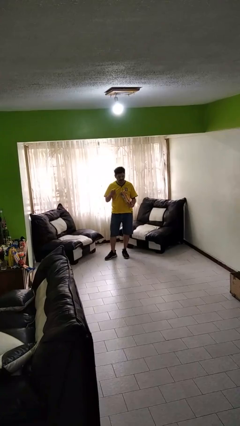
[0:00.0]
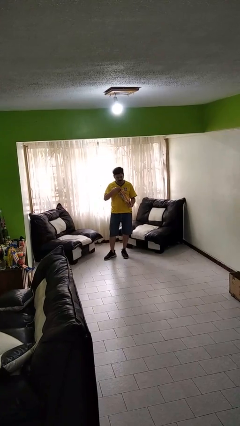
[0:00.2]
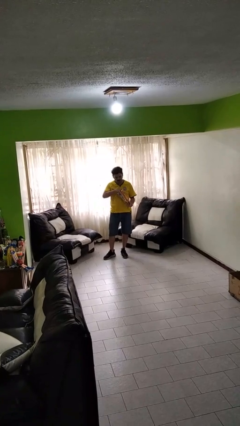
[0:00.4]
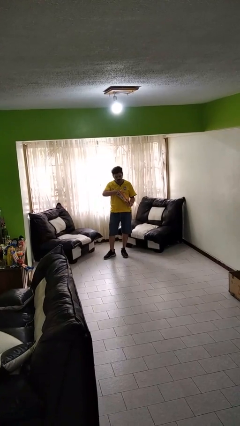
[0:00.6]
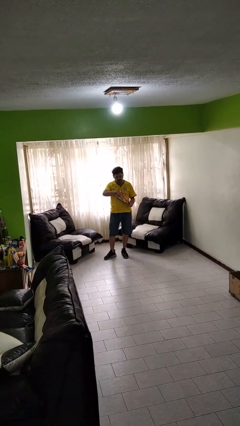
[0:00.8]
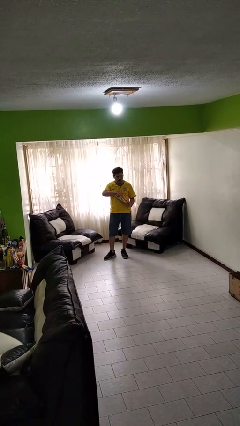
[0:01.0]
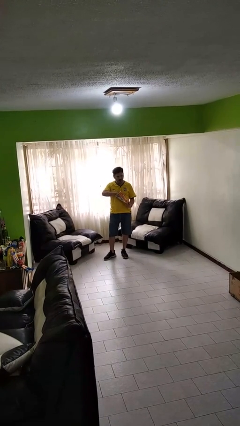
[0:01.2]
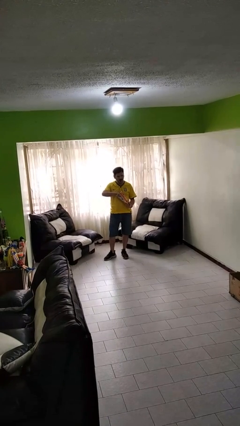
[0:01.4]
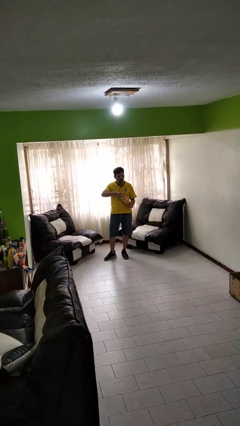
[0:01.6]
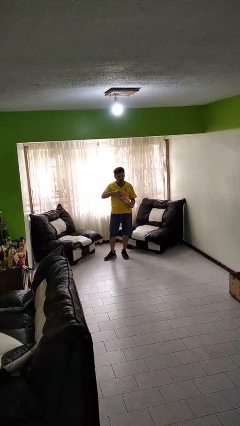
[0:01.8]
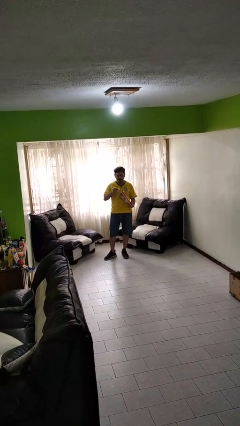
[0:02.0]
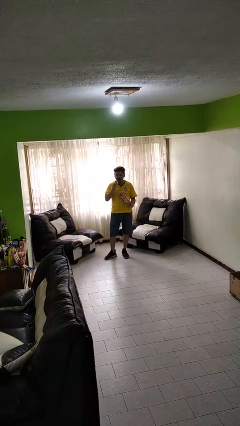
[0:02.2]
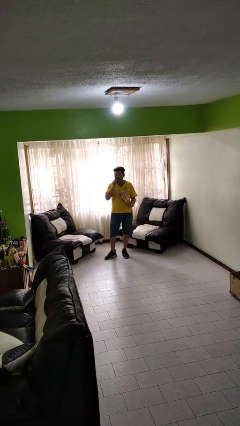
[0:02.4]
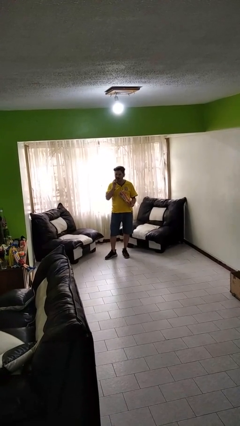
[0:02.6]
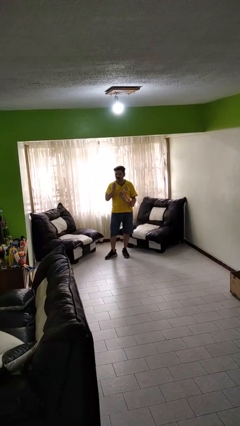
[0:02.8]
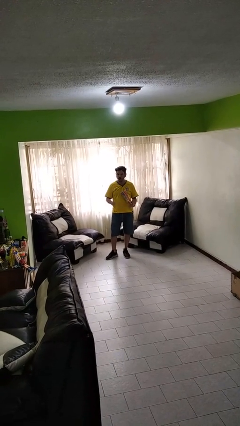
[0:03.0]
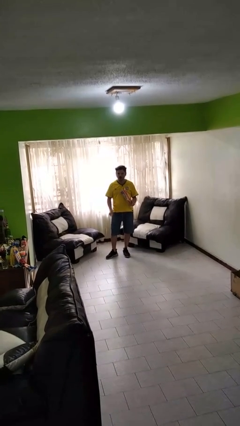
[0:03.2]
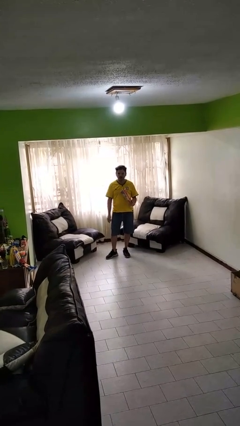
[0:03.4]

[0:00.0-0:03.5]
person eats snack from bag

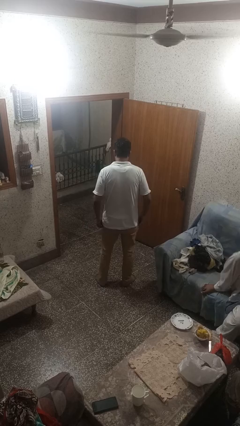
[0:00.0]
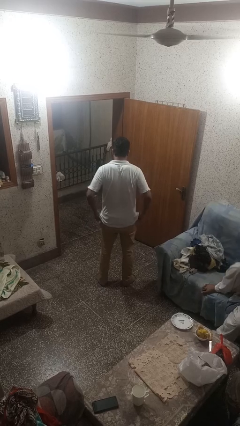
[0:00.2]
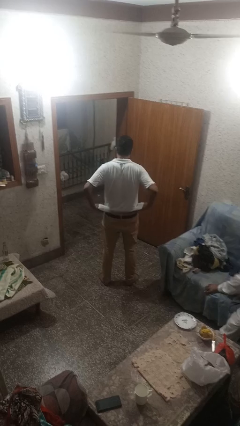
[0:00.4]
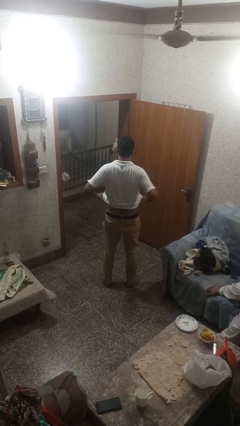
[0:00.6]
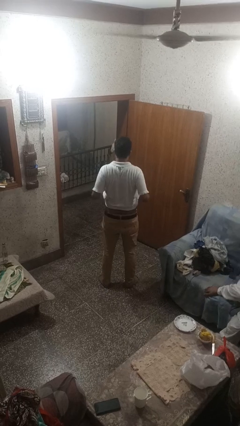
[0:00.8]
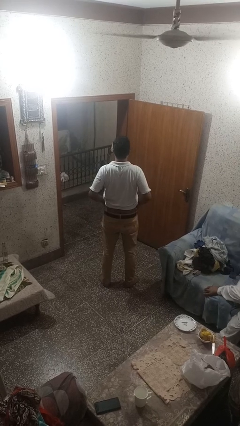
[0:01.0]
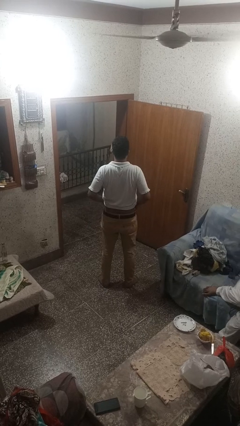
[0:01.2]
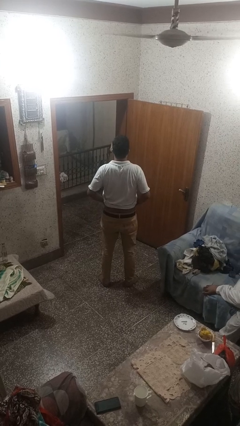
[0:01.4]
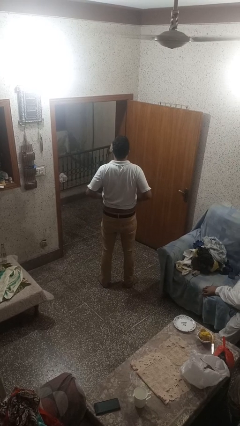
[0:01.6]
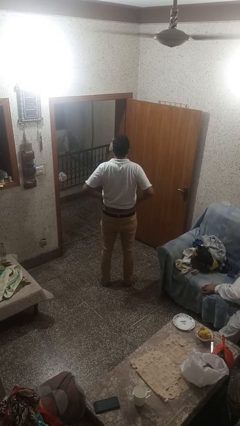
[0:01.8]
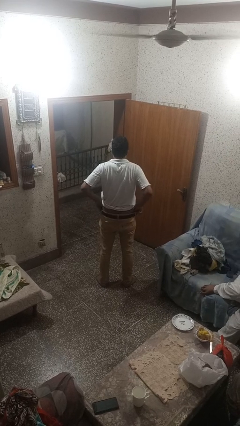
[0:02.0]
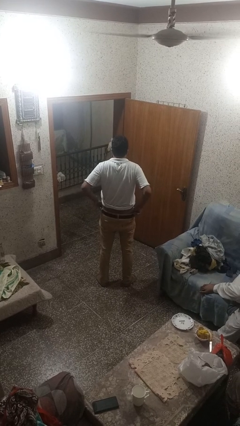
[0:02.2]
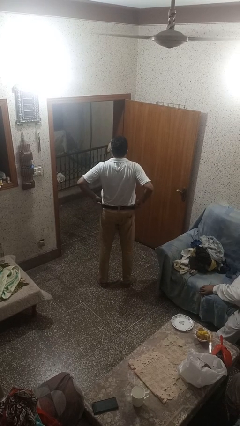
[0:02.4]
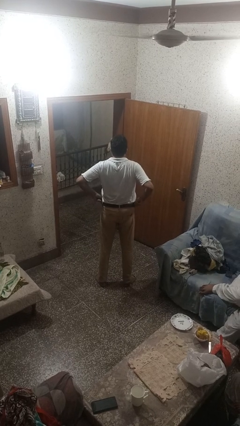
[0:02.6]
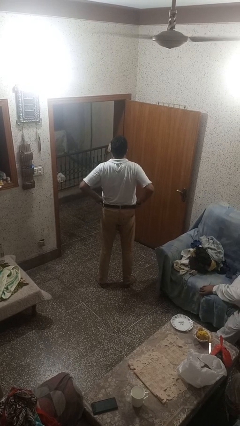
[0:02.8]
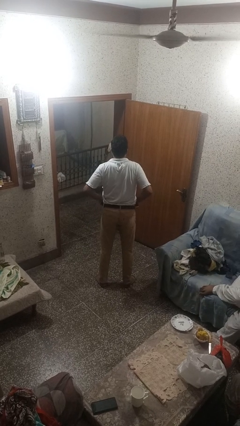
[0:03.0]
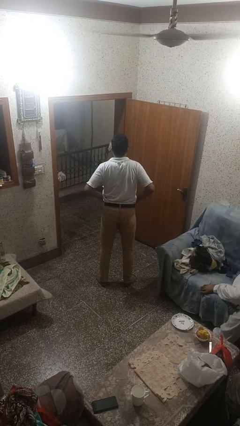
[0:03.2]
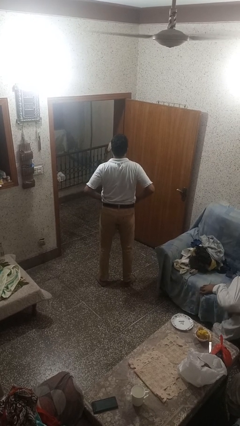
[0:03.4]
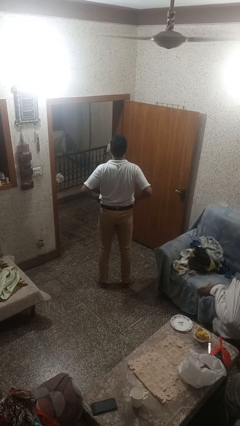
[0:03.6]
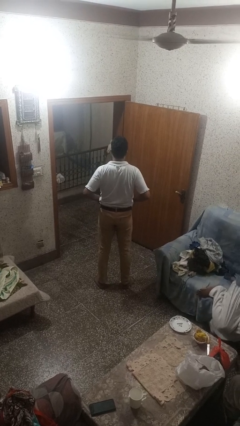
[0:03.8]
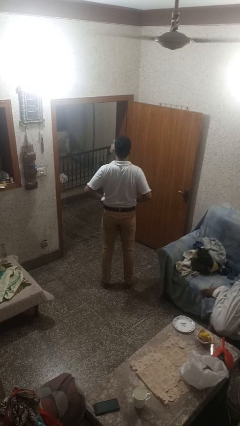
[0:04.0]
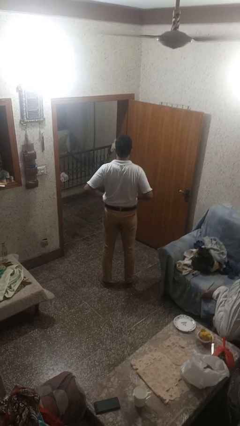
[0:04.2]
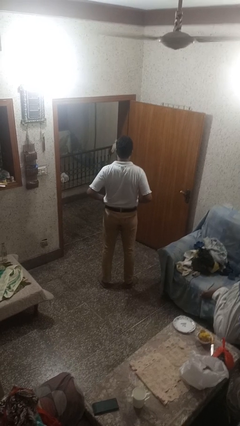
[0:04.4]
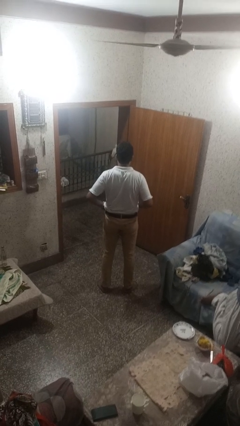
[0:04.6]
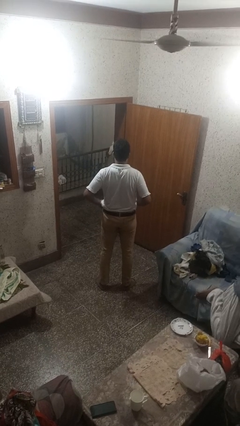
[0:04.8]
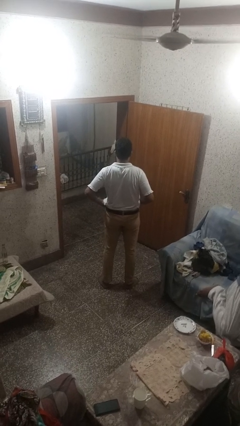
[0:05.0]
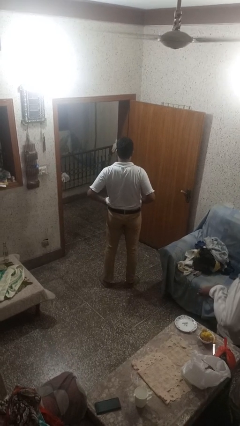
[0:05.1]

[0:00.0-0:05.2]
person hikes up pants

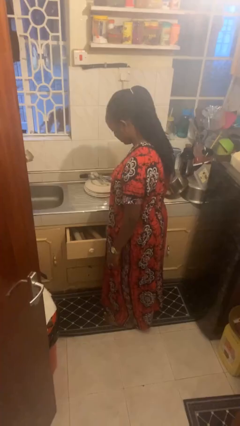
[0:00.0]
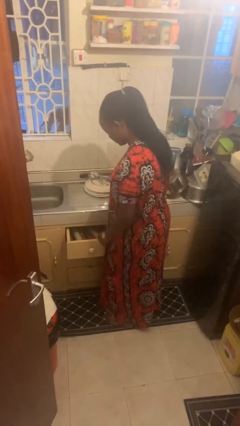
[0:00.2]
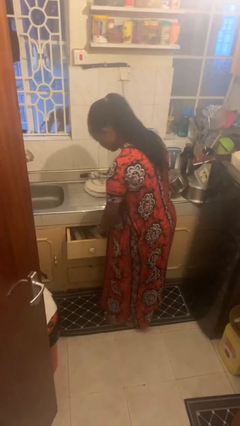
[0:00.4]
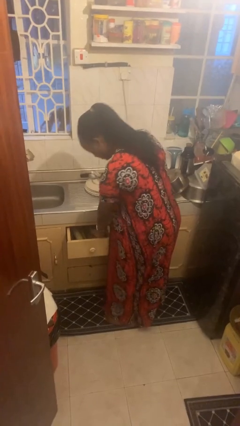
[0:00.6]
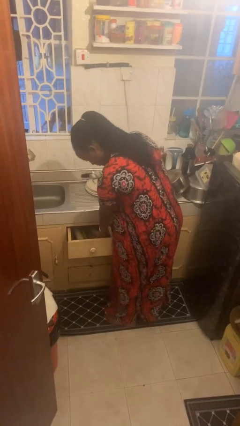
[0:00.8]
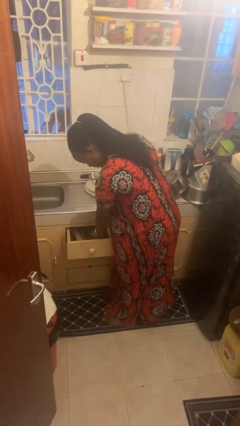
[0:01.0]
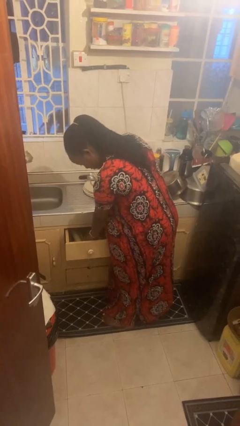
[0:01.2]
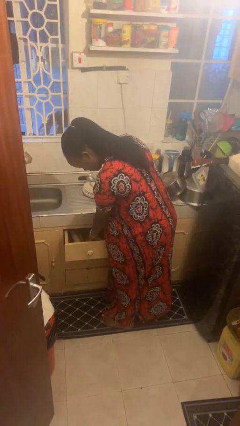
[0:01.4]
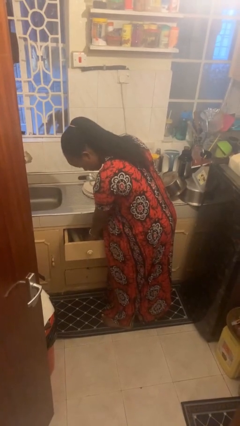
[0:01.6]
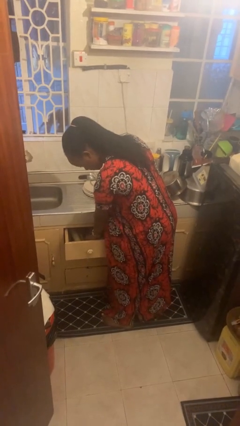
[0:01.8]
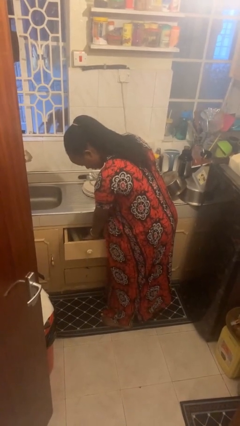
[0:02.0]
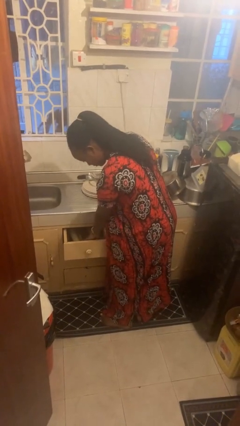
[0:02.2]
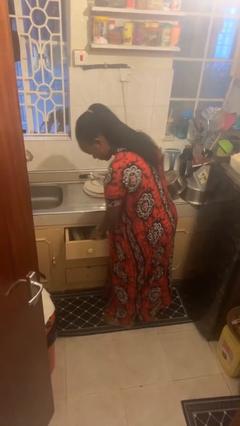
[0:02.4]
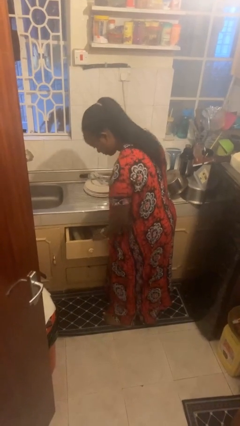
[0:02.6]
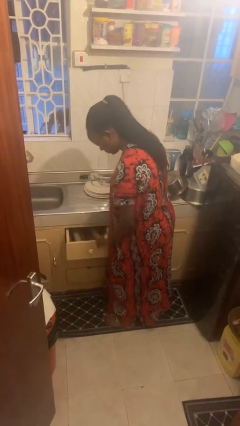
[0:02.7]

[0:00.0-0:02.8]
person searches in kitchen drawer

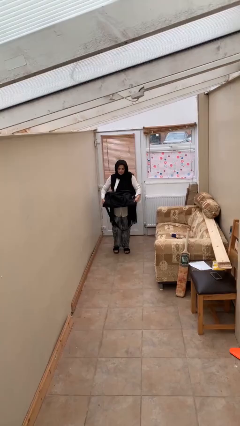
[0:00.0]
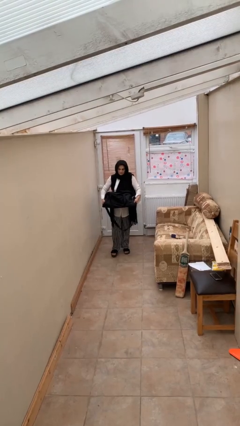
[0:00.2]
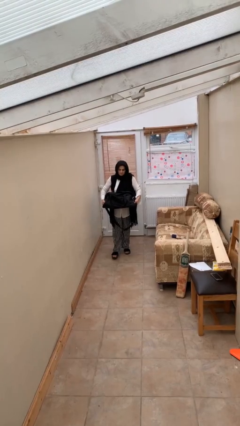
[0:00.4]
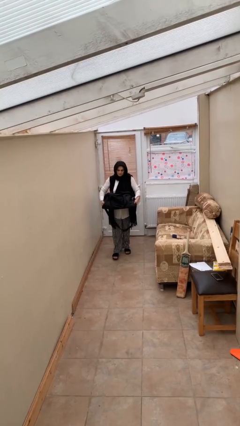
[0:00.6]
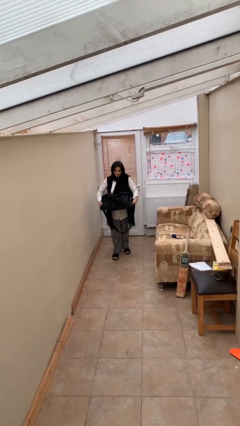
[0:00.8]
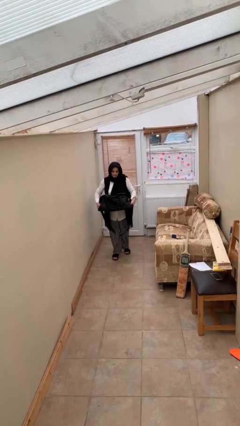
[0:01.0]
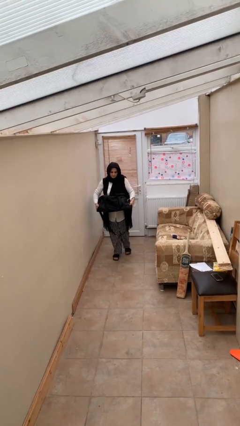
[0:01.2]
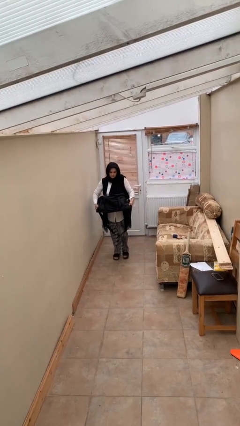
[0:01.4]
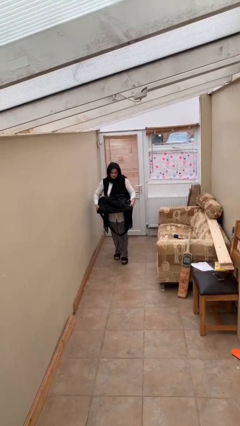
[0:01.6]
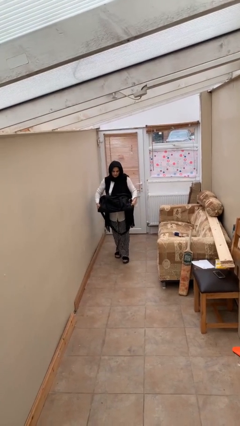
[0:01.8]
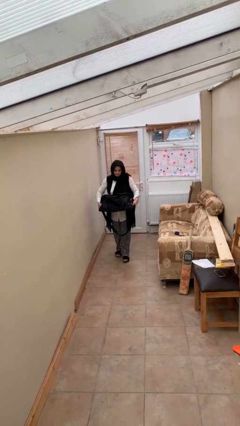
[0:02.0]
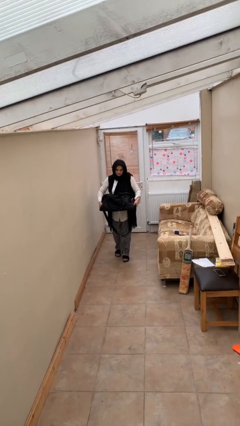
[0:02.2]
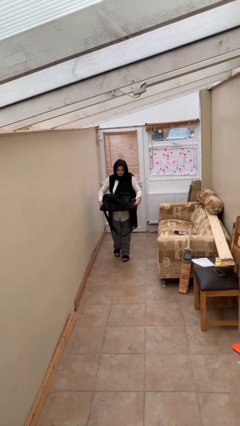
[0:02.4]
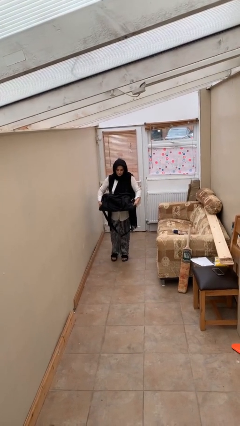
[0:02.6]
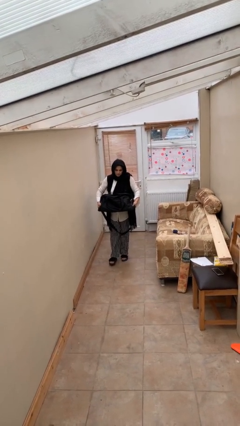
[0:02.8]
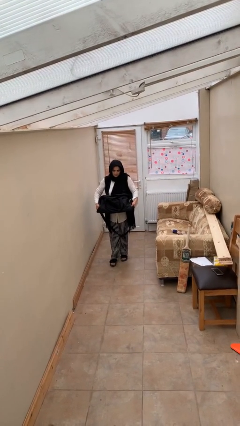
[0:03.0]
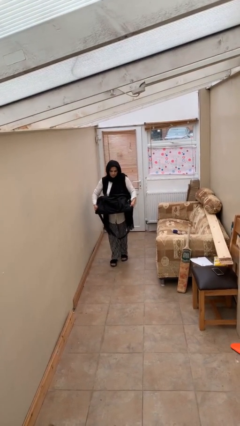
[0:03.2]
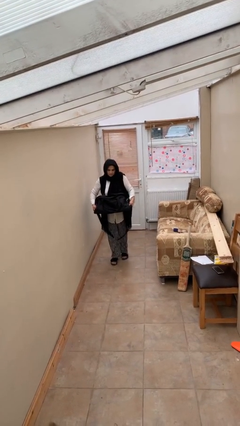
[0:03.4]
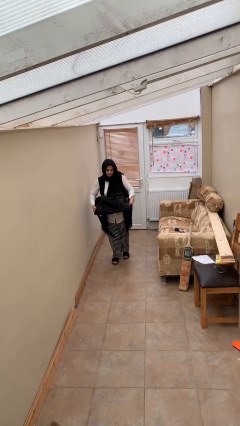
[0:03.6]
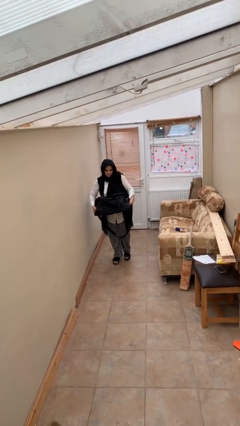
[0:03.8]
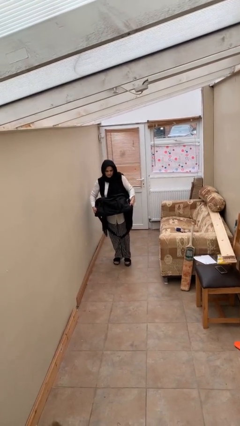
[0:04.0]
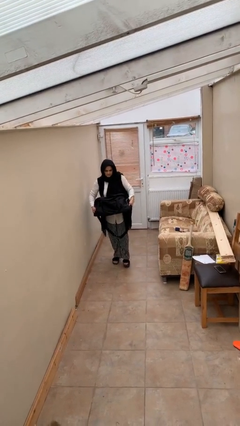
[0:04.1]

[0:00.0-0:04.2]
person carries heavy object

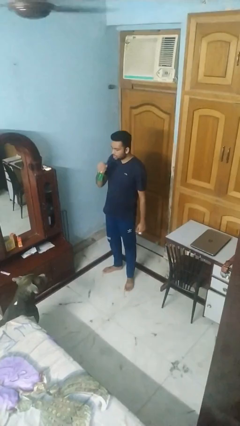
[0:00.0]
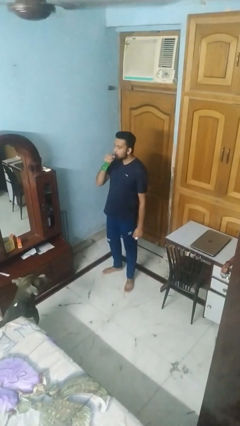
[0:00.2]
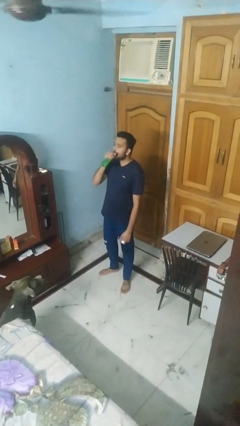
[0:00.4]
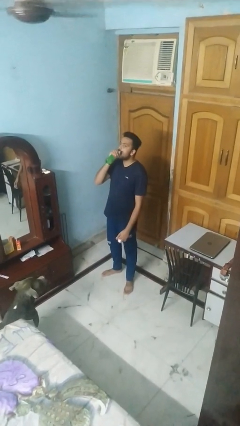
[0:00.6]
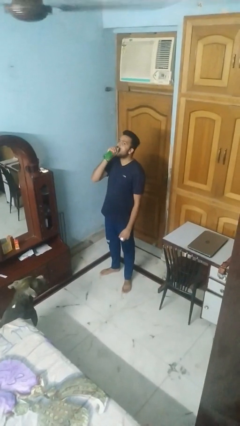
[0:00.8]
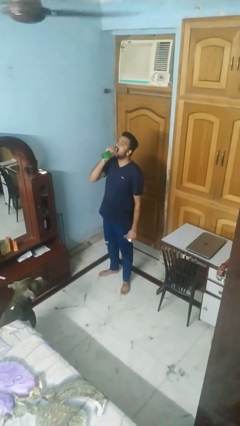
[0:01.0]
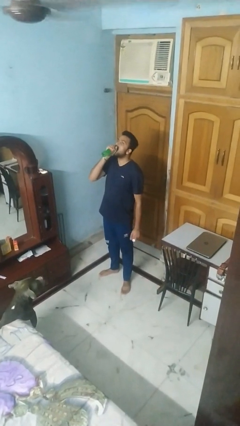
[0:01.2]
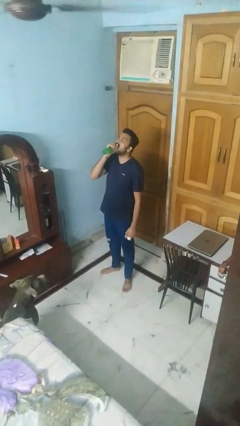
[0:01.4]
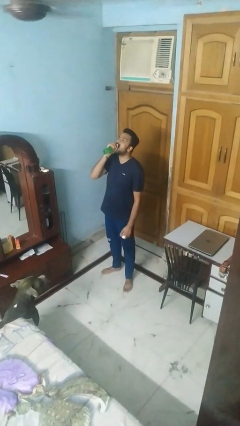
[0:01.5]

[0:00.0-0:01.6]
person drinks from bottle

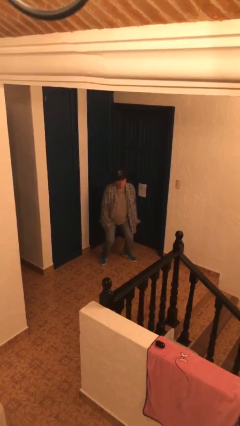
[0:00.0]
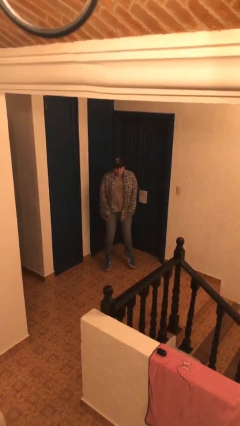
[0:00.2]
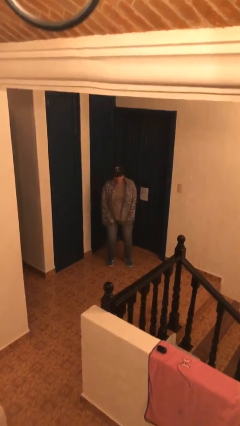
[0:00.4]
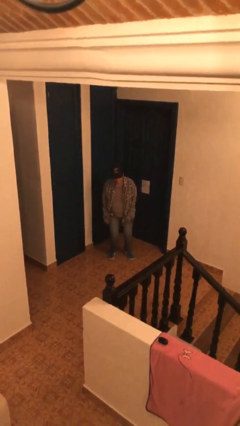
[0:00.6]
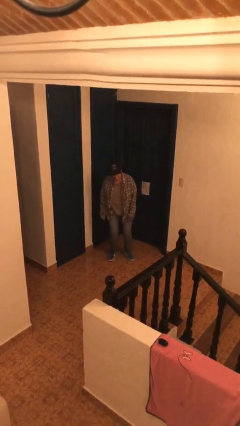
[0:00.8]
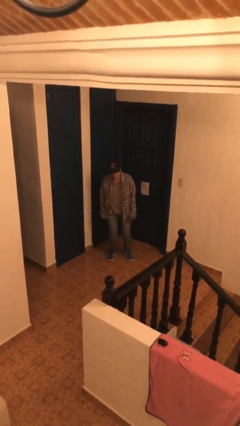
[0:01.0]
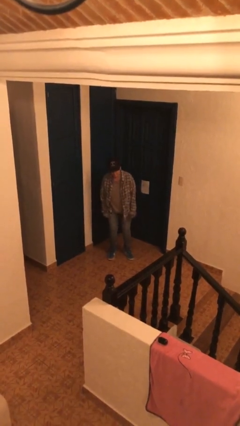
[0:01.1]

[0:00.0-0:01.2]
person jumps
